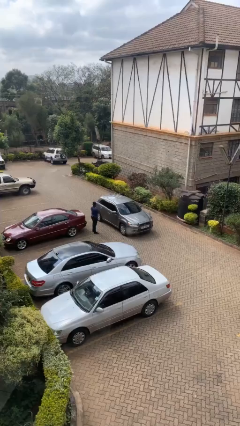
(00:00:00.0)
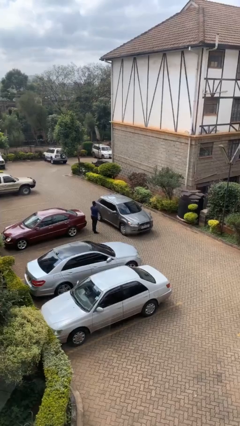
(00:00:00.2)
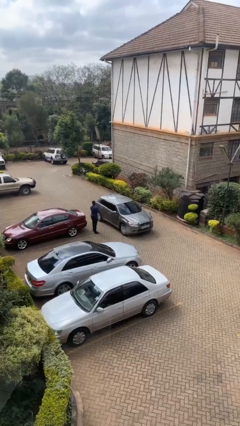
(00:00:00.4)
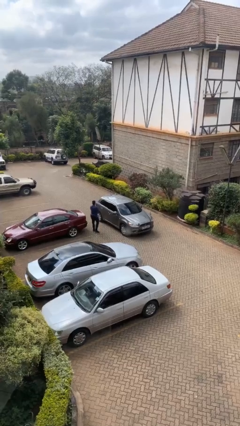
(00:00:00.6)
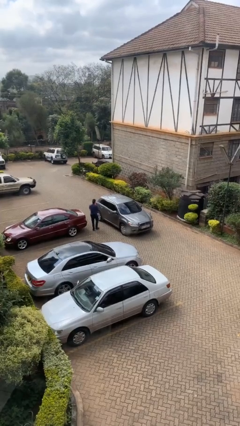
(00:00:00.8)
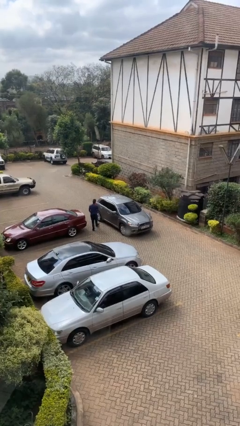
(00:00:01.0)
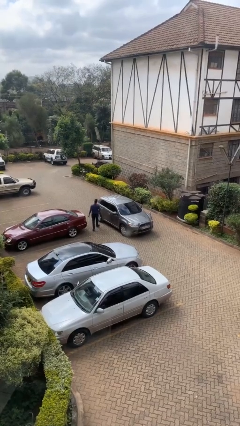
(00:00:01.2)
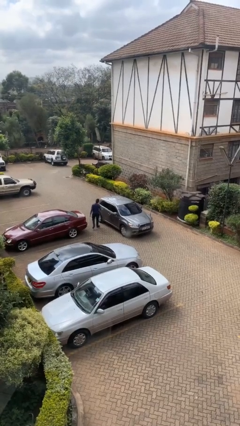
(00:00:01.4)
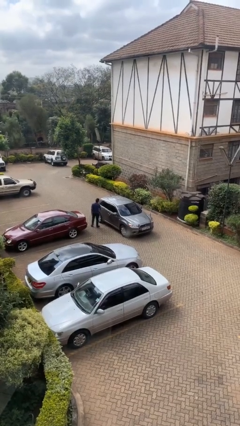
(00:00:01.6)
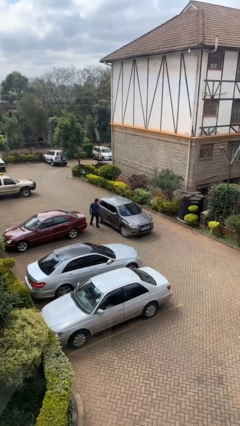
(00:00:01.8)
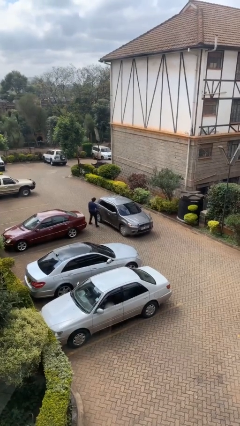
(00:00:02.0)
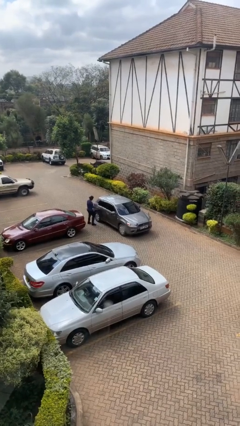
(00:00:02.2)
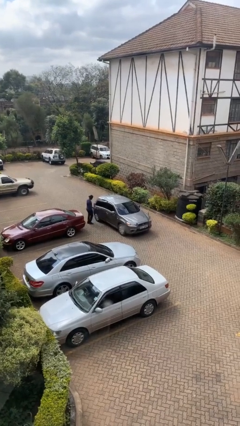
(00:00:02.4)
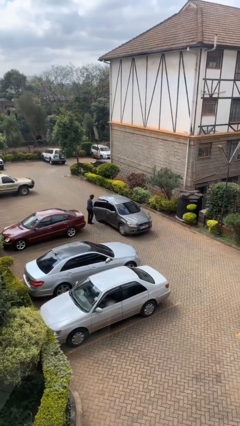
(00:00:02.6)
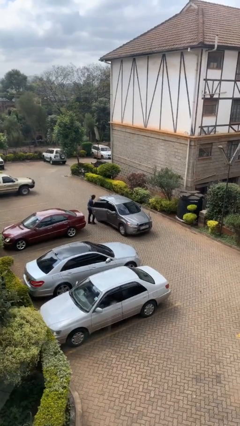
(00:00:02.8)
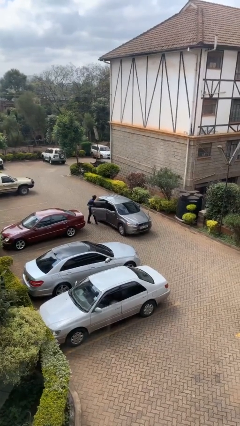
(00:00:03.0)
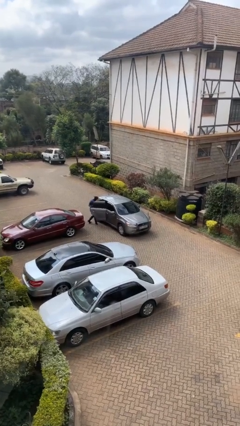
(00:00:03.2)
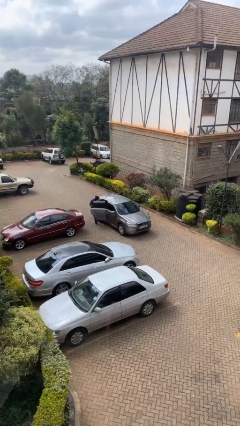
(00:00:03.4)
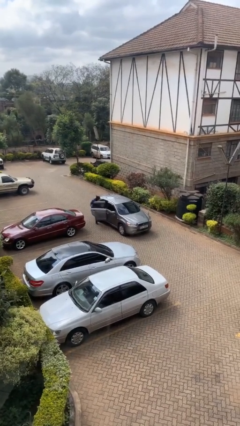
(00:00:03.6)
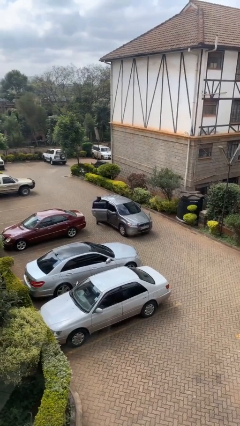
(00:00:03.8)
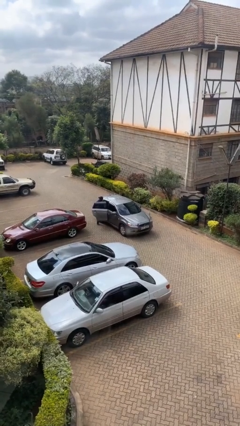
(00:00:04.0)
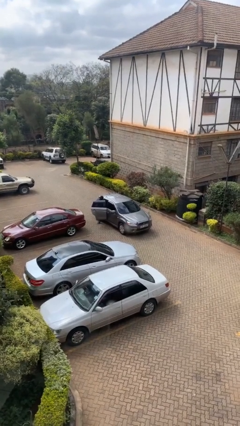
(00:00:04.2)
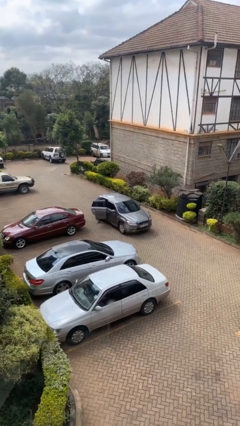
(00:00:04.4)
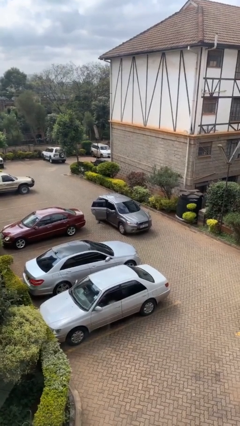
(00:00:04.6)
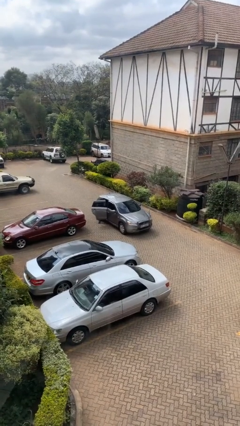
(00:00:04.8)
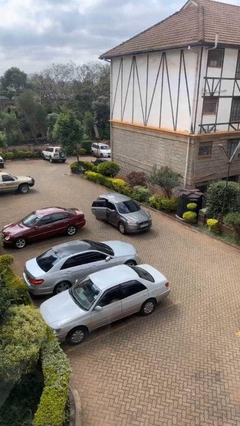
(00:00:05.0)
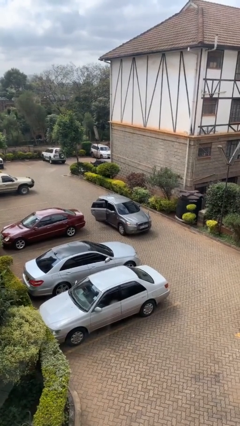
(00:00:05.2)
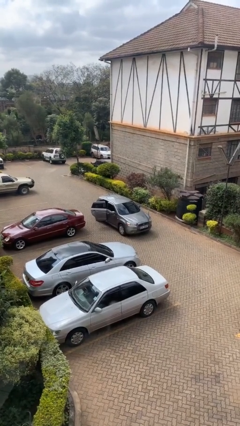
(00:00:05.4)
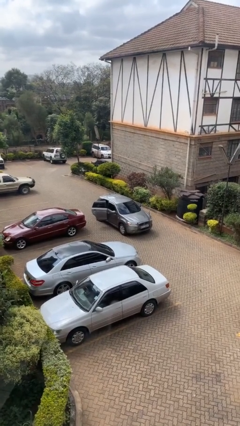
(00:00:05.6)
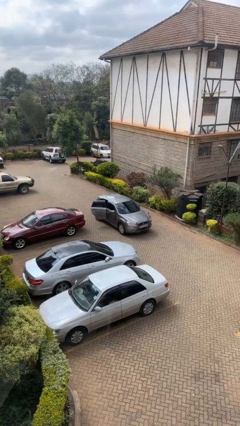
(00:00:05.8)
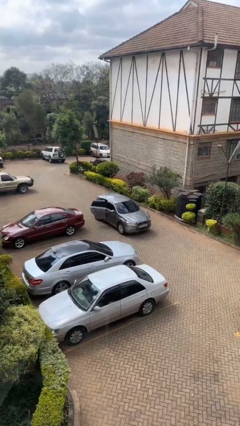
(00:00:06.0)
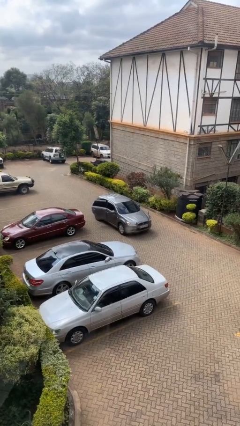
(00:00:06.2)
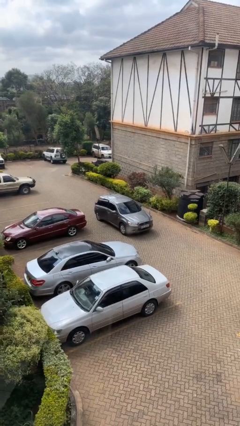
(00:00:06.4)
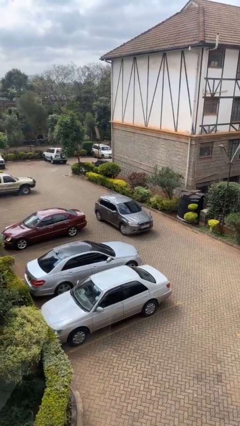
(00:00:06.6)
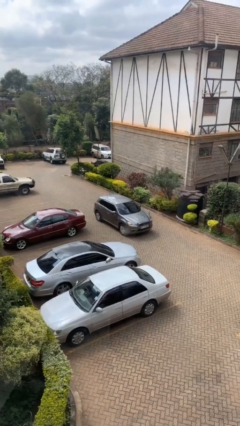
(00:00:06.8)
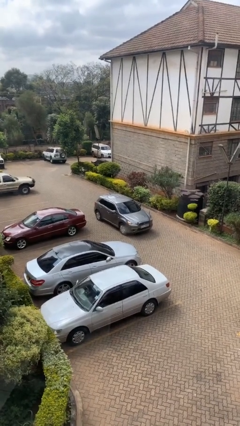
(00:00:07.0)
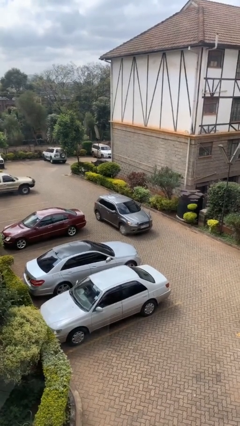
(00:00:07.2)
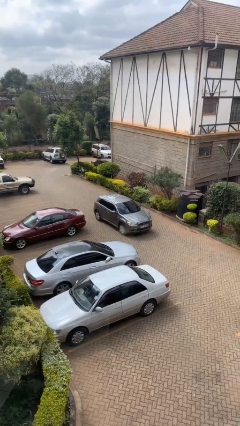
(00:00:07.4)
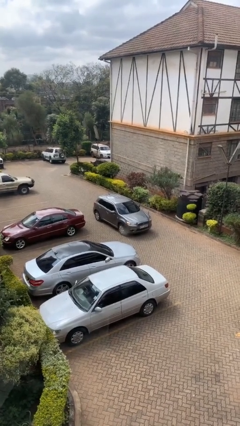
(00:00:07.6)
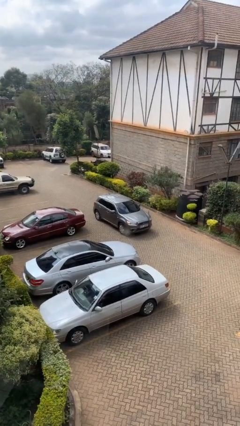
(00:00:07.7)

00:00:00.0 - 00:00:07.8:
car picks up person

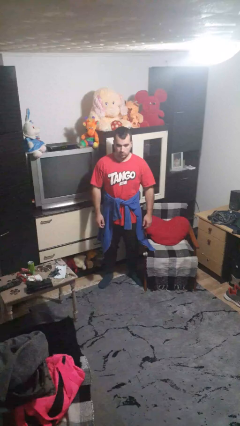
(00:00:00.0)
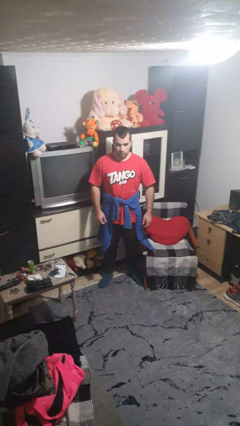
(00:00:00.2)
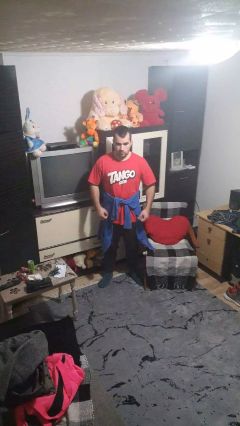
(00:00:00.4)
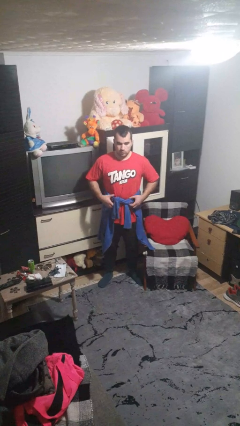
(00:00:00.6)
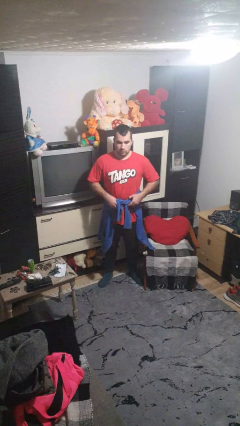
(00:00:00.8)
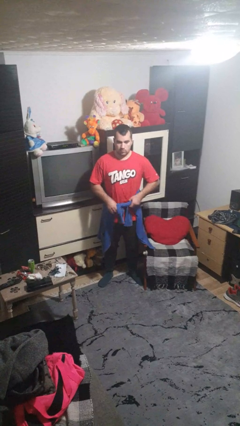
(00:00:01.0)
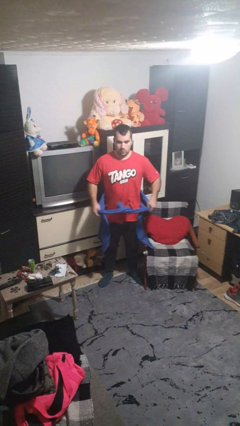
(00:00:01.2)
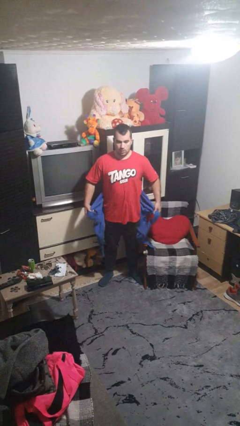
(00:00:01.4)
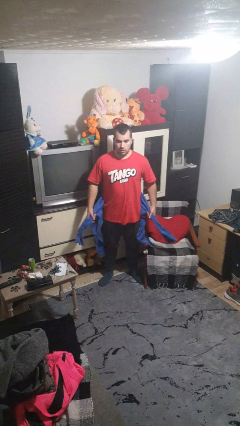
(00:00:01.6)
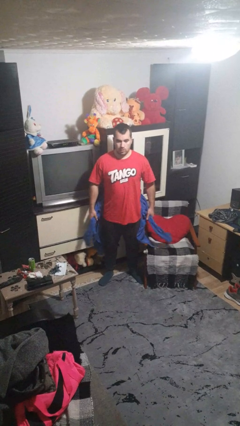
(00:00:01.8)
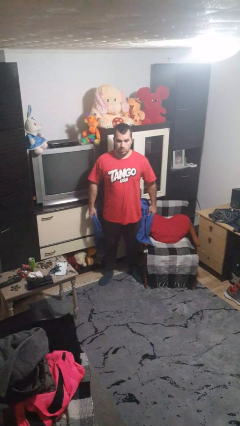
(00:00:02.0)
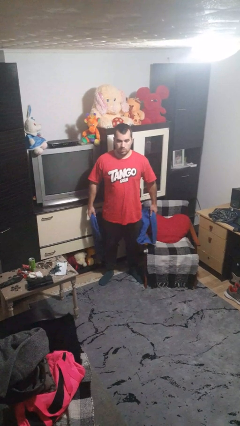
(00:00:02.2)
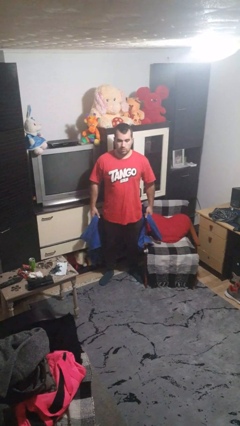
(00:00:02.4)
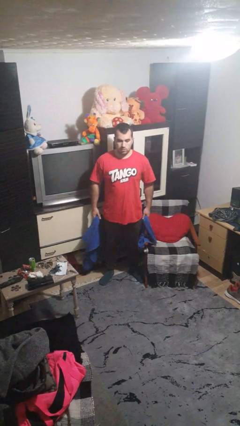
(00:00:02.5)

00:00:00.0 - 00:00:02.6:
person unties jacket around waist

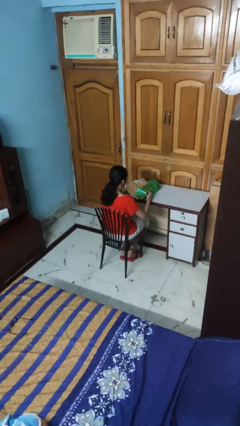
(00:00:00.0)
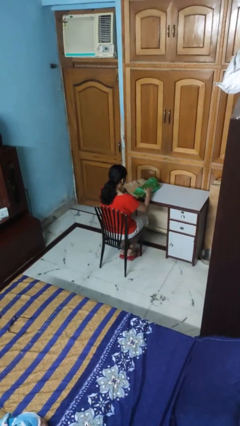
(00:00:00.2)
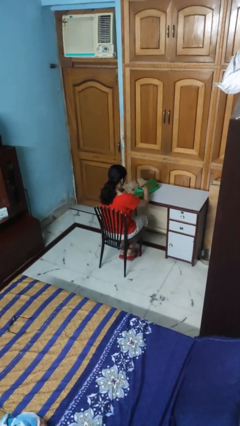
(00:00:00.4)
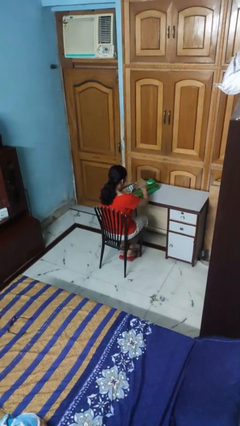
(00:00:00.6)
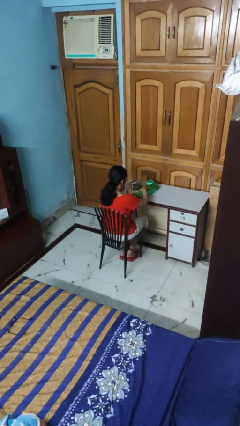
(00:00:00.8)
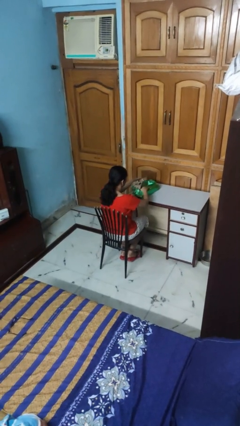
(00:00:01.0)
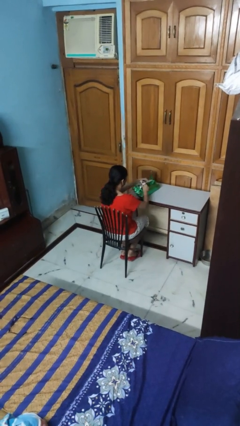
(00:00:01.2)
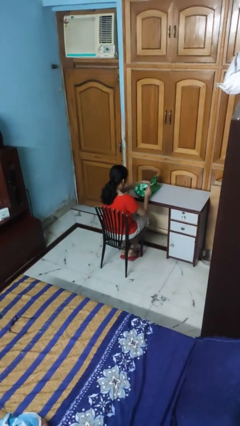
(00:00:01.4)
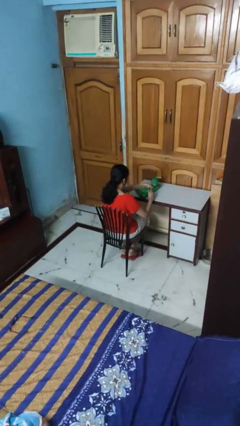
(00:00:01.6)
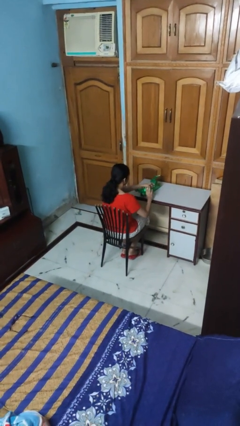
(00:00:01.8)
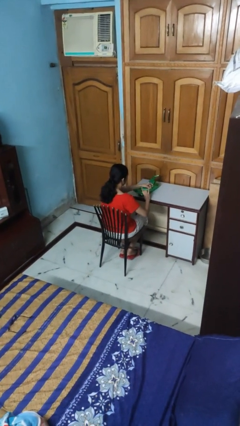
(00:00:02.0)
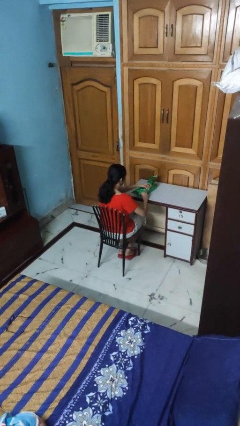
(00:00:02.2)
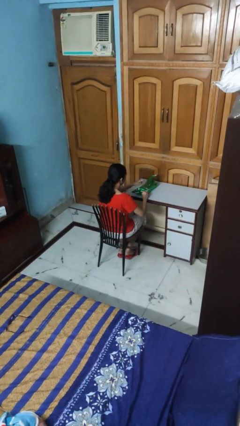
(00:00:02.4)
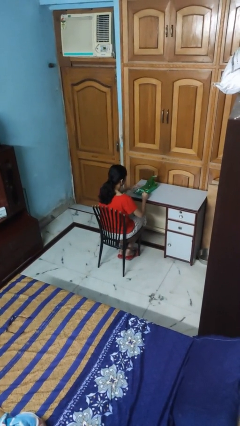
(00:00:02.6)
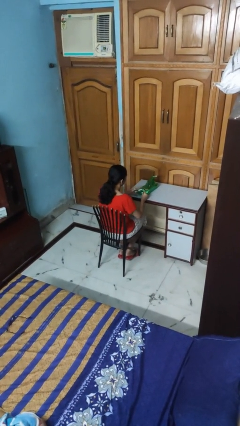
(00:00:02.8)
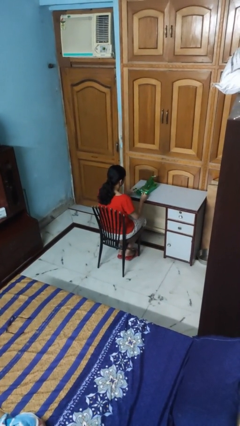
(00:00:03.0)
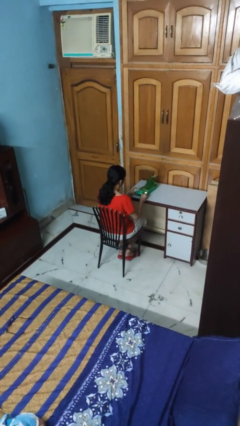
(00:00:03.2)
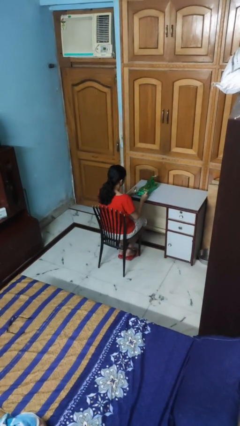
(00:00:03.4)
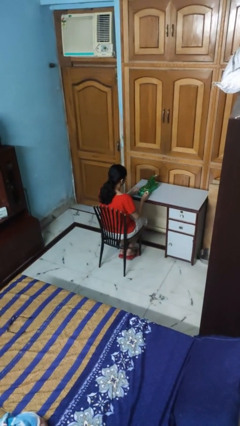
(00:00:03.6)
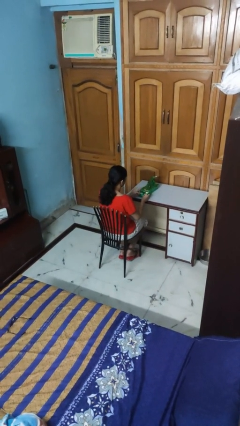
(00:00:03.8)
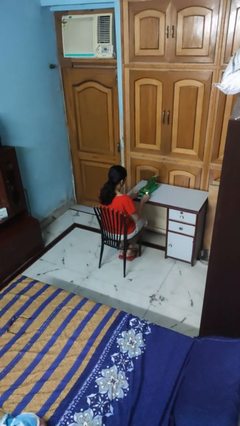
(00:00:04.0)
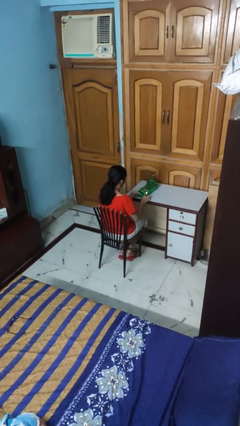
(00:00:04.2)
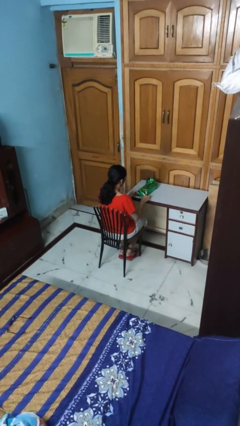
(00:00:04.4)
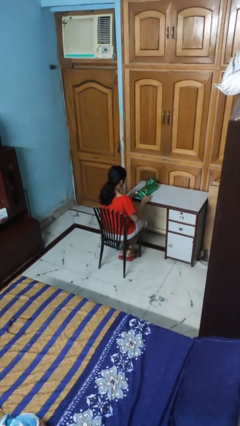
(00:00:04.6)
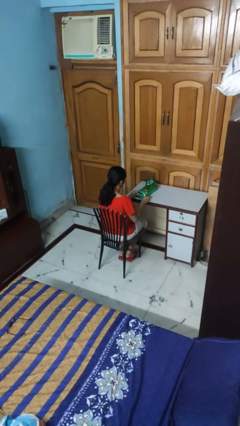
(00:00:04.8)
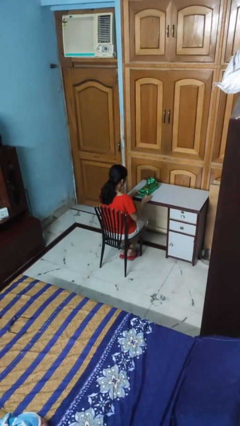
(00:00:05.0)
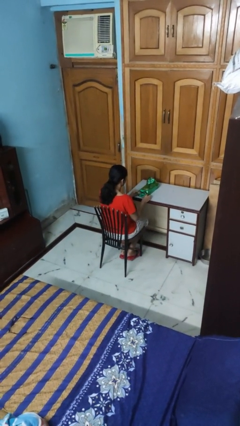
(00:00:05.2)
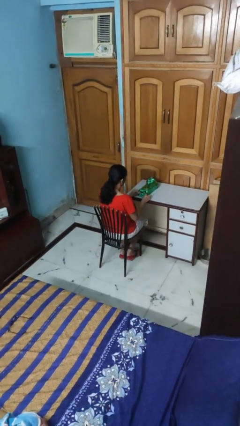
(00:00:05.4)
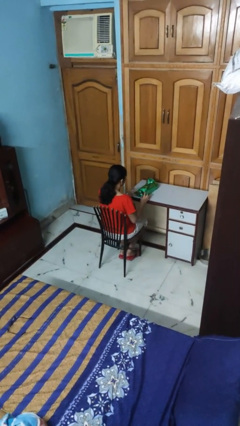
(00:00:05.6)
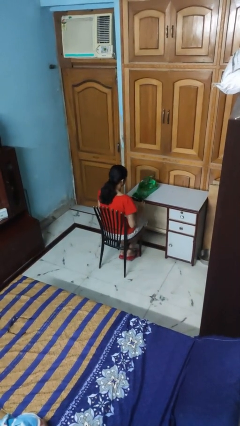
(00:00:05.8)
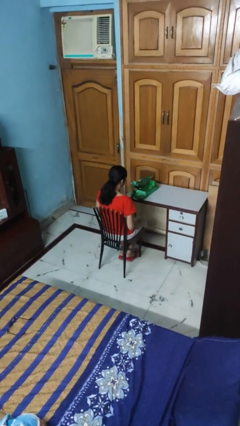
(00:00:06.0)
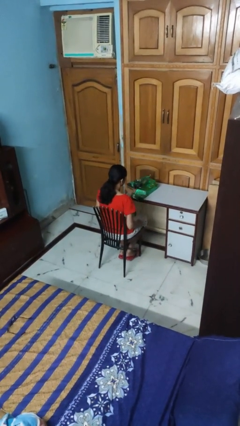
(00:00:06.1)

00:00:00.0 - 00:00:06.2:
person wraps box

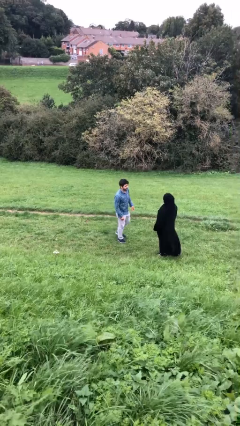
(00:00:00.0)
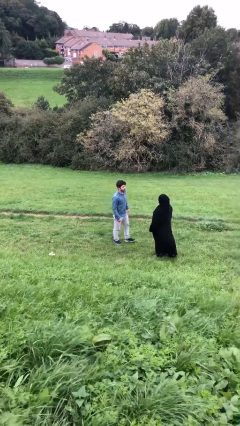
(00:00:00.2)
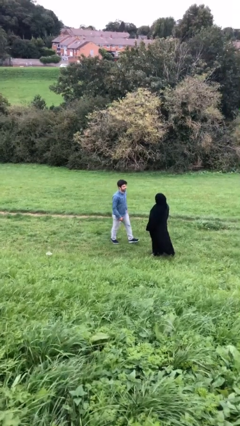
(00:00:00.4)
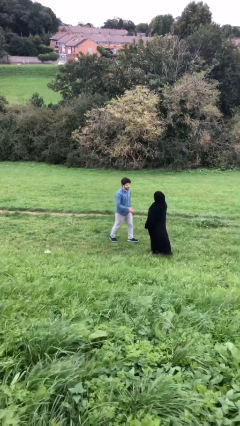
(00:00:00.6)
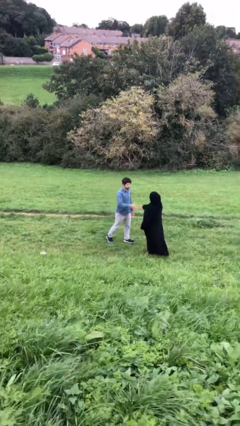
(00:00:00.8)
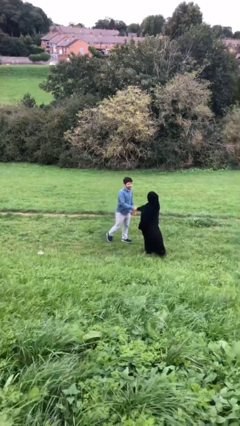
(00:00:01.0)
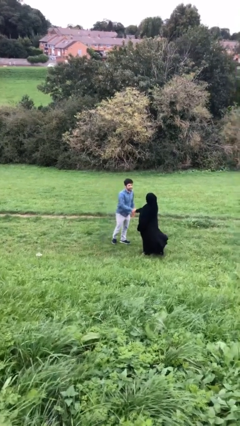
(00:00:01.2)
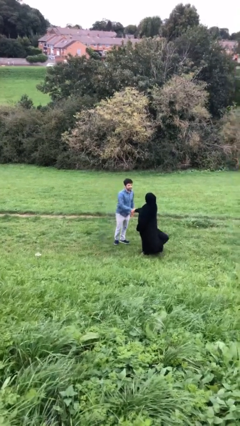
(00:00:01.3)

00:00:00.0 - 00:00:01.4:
person shakes hand
